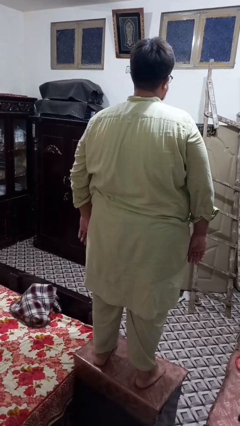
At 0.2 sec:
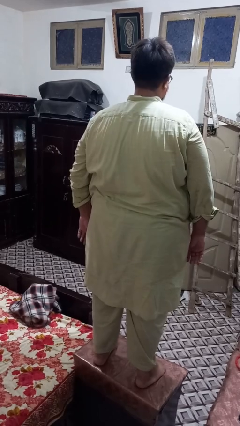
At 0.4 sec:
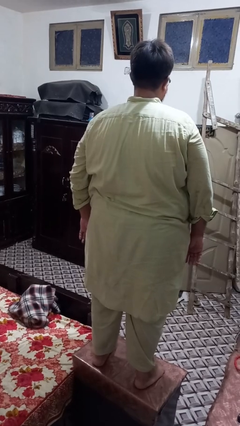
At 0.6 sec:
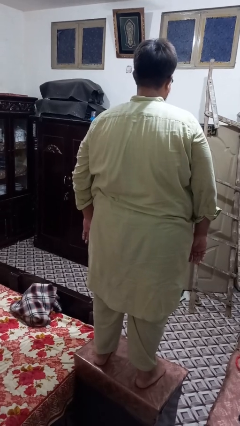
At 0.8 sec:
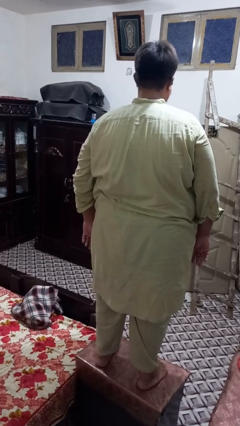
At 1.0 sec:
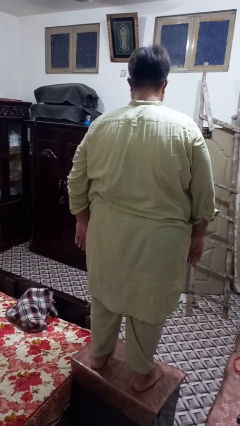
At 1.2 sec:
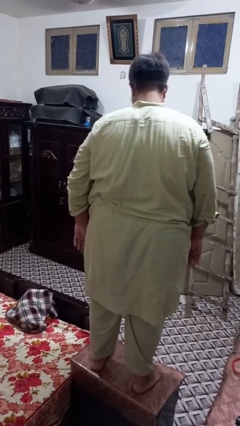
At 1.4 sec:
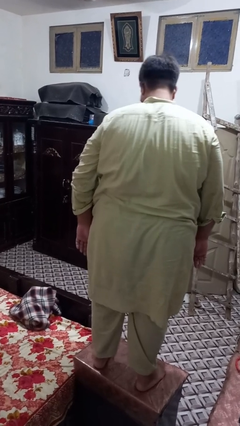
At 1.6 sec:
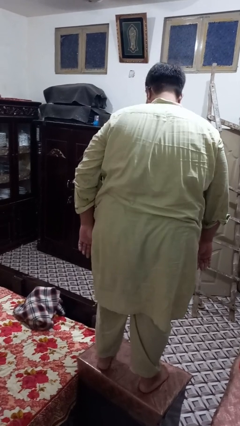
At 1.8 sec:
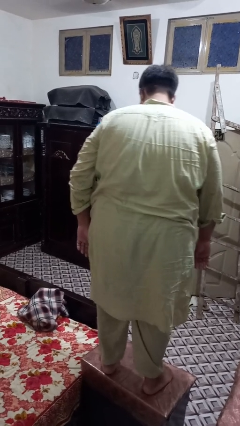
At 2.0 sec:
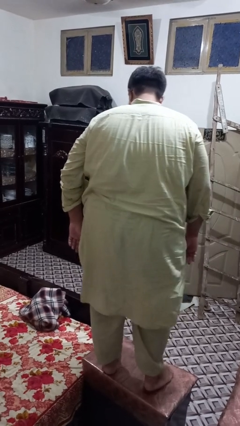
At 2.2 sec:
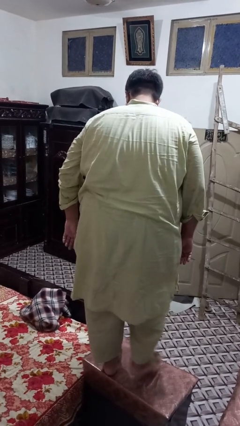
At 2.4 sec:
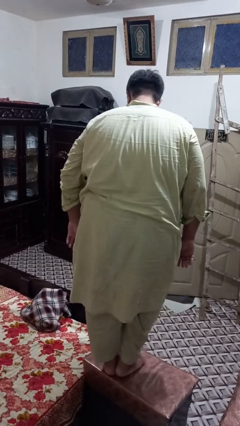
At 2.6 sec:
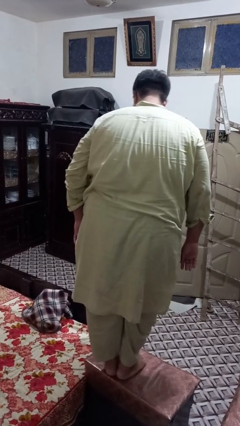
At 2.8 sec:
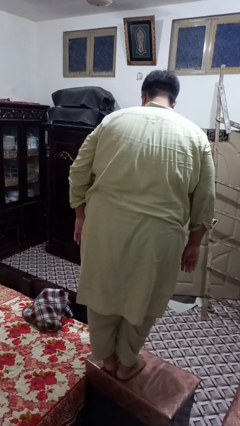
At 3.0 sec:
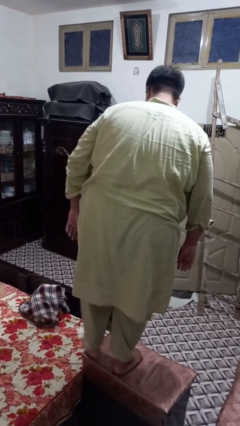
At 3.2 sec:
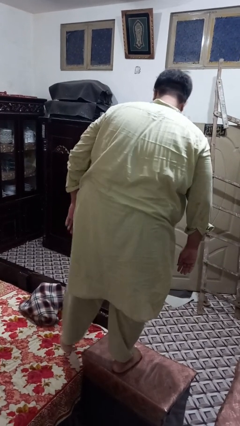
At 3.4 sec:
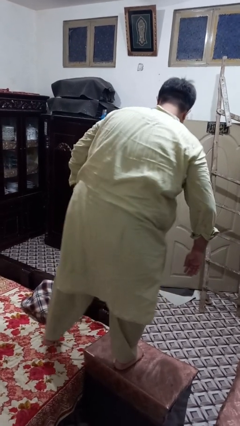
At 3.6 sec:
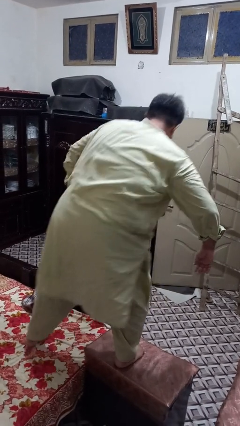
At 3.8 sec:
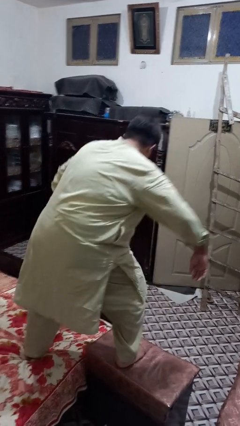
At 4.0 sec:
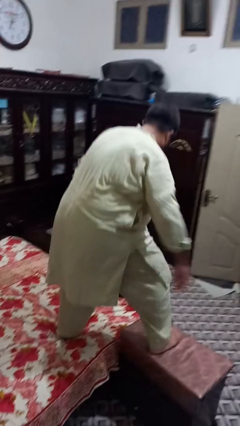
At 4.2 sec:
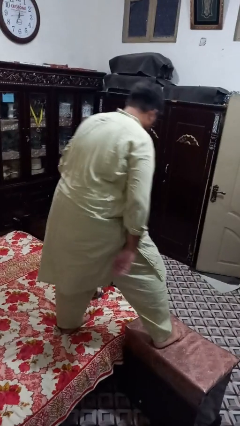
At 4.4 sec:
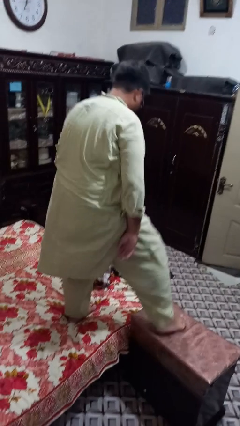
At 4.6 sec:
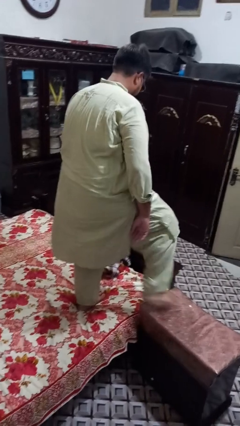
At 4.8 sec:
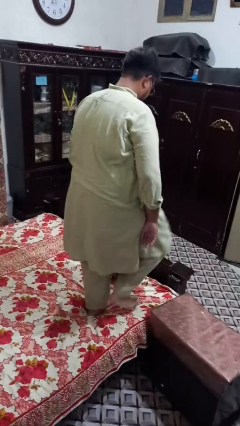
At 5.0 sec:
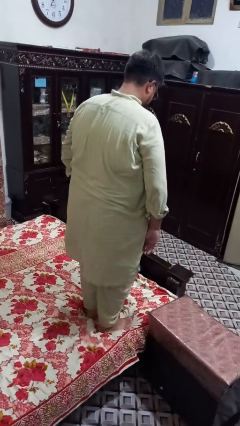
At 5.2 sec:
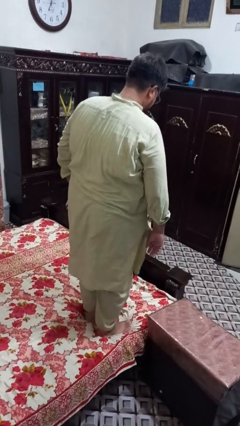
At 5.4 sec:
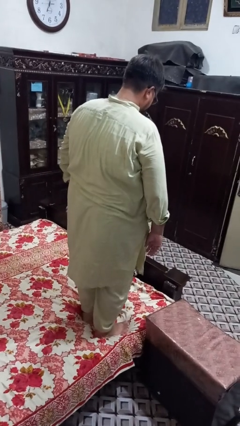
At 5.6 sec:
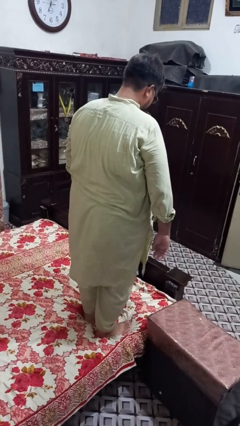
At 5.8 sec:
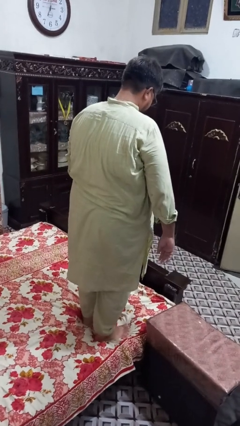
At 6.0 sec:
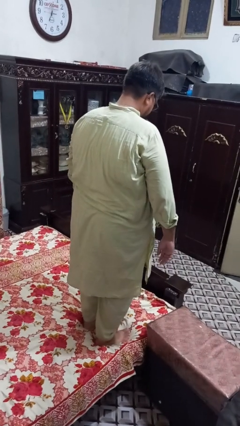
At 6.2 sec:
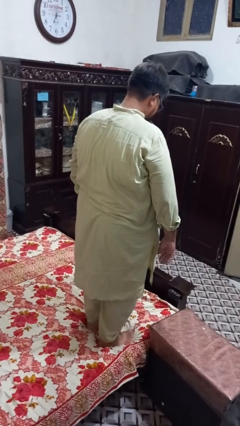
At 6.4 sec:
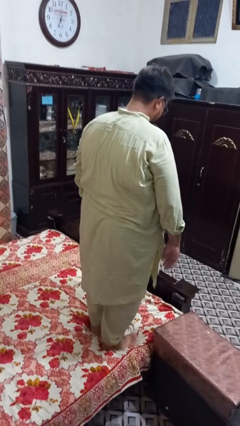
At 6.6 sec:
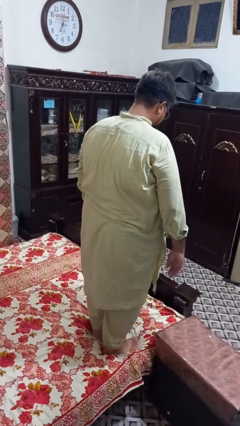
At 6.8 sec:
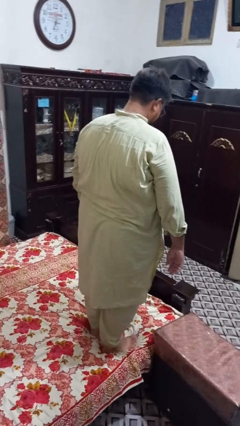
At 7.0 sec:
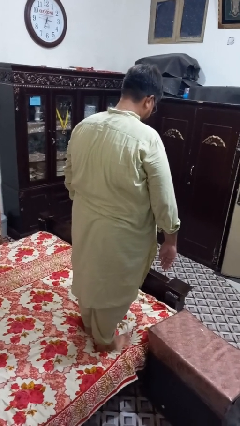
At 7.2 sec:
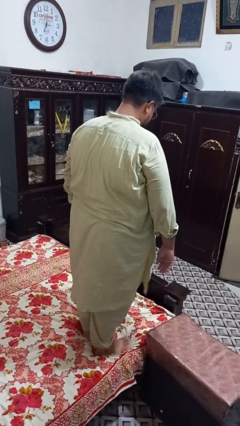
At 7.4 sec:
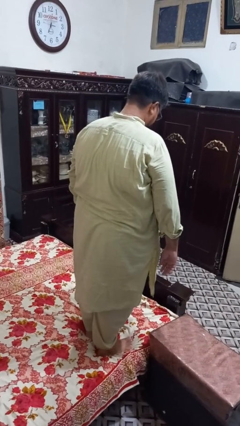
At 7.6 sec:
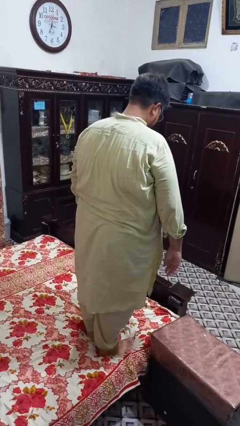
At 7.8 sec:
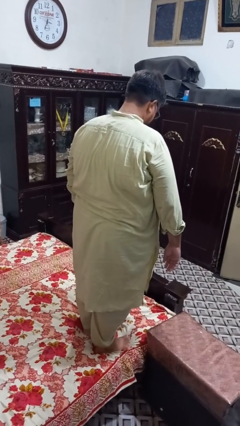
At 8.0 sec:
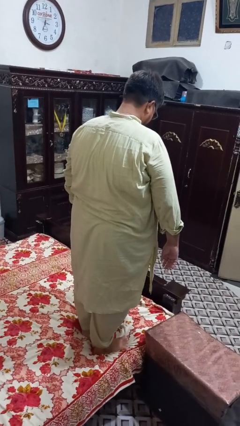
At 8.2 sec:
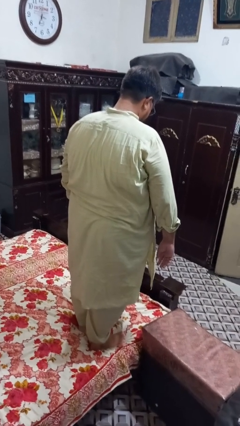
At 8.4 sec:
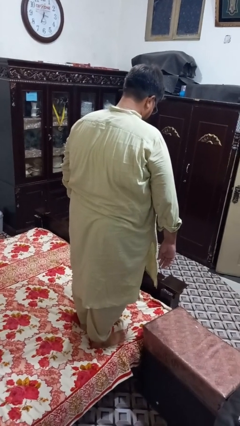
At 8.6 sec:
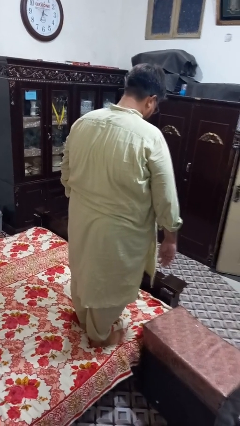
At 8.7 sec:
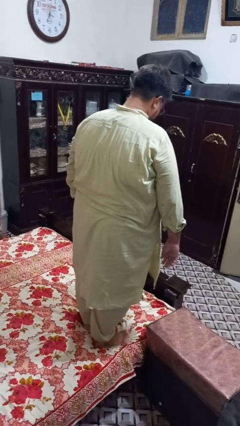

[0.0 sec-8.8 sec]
person climbs off table

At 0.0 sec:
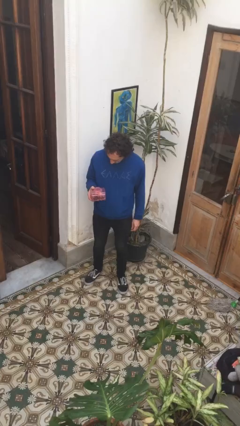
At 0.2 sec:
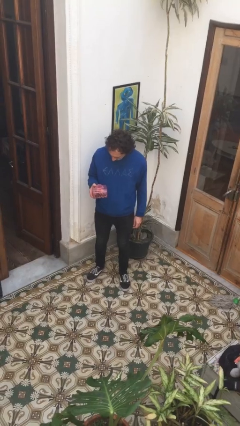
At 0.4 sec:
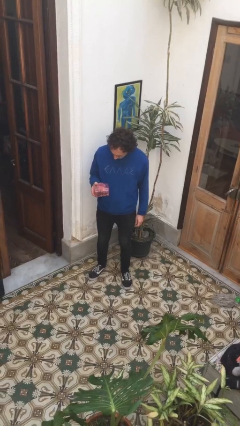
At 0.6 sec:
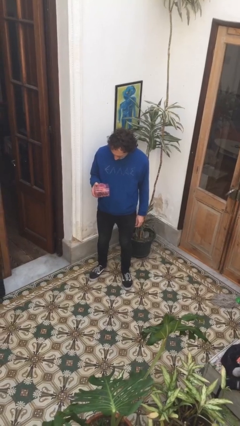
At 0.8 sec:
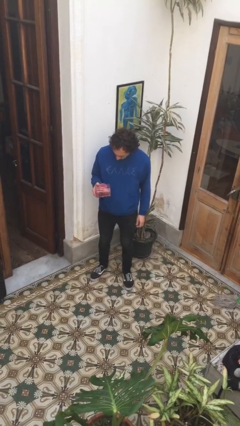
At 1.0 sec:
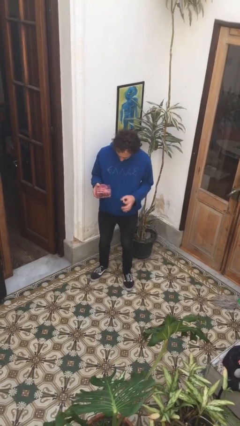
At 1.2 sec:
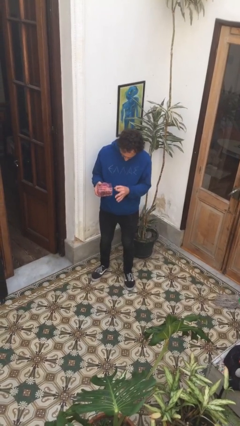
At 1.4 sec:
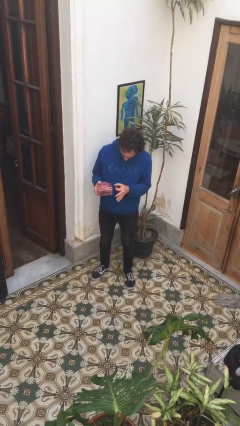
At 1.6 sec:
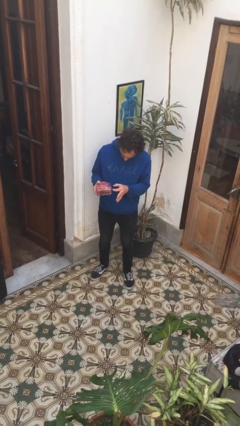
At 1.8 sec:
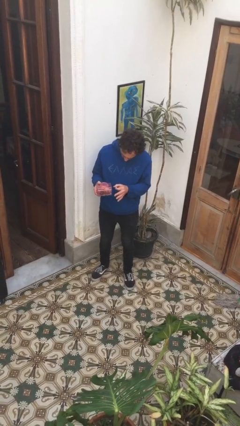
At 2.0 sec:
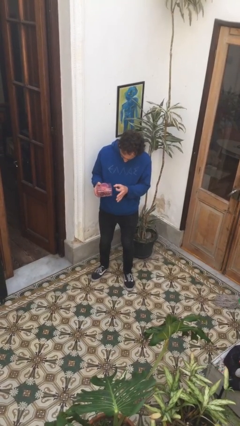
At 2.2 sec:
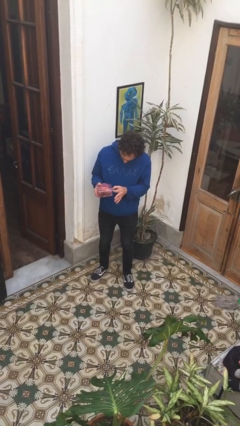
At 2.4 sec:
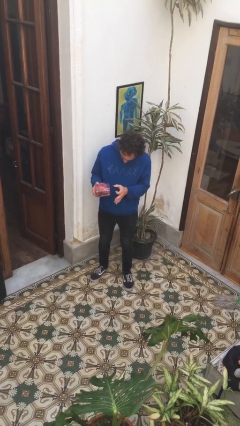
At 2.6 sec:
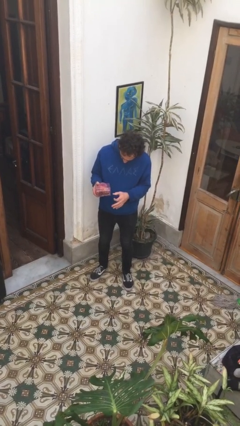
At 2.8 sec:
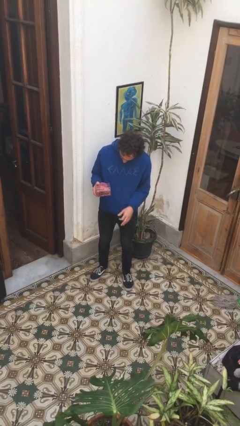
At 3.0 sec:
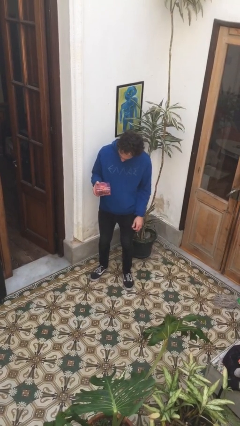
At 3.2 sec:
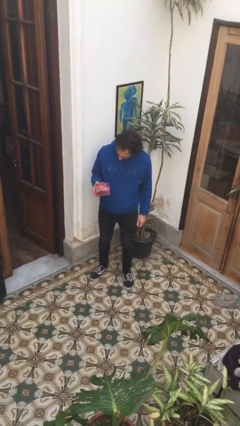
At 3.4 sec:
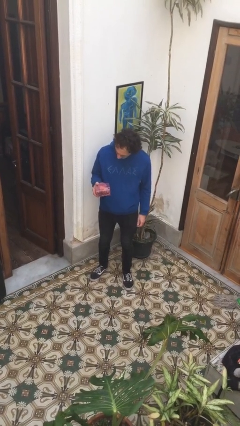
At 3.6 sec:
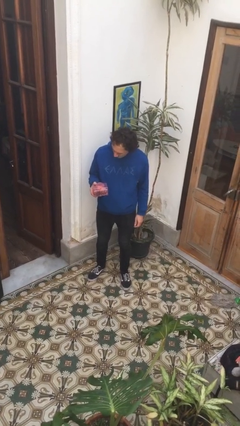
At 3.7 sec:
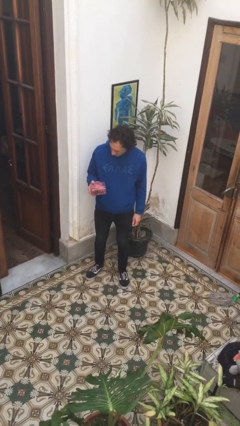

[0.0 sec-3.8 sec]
person taps object with finger

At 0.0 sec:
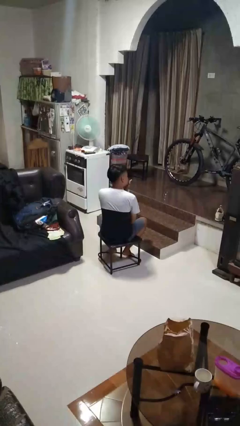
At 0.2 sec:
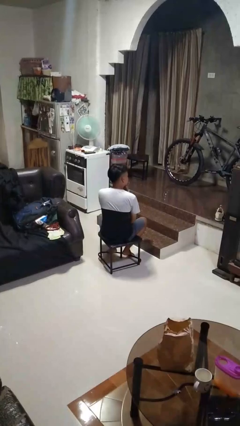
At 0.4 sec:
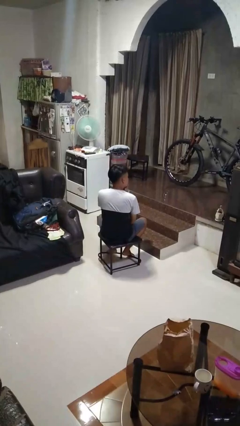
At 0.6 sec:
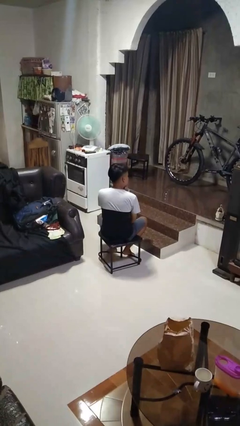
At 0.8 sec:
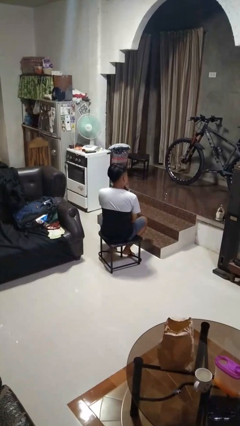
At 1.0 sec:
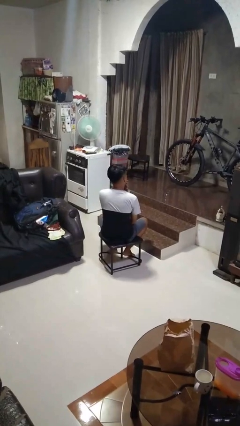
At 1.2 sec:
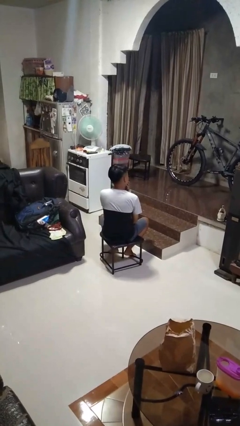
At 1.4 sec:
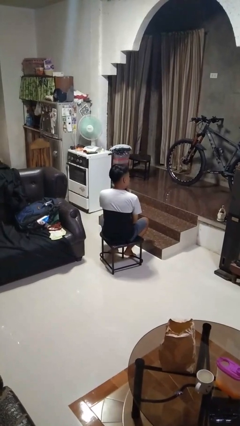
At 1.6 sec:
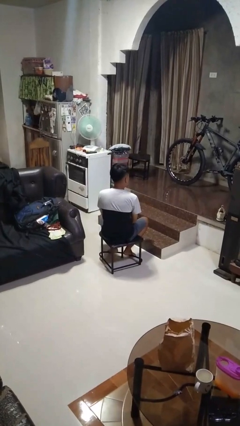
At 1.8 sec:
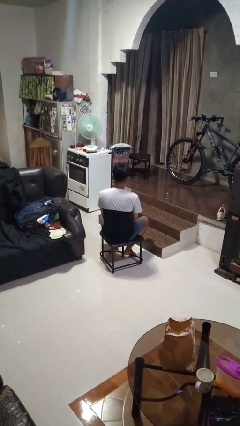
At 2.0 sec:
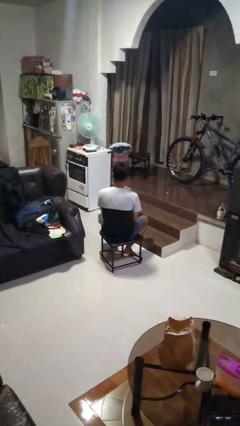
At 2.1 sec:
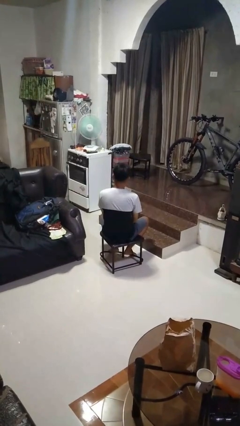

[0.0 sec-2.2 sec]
person strokes chin

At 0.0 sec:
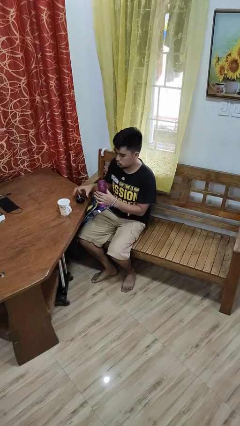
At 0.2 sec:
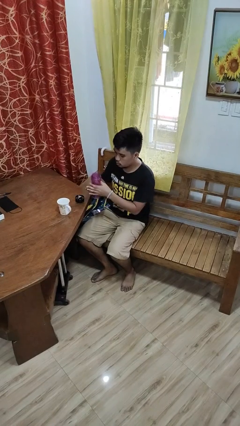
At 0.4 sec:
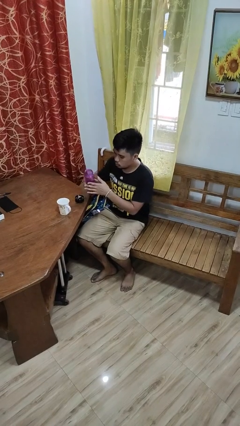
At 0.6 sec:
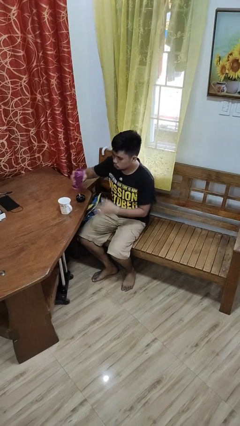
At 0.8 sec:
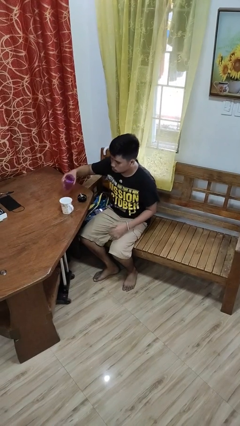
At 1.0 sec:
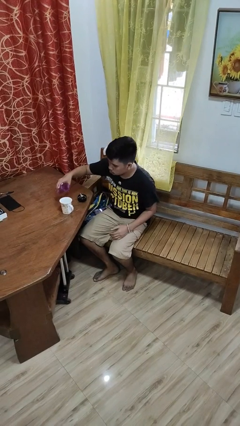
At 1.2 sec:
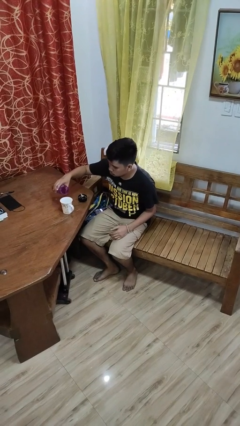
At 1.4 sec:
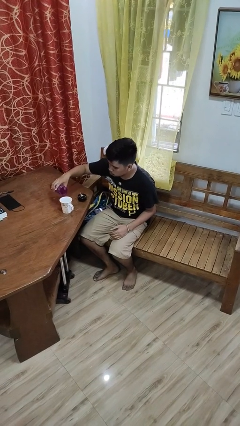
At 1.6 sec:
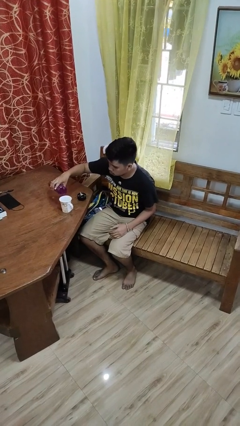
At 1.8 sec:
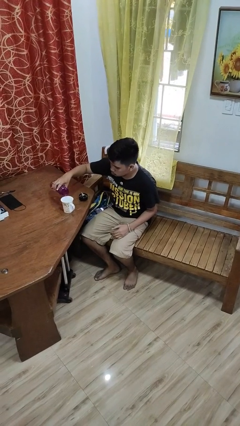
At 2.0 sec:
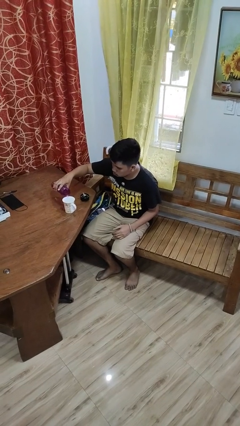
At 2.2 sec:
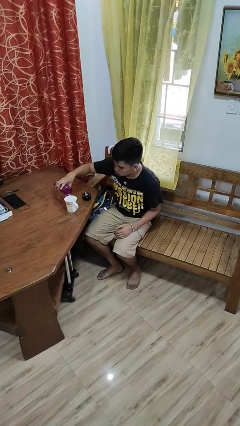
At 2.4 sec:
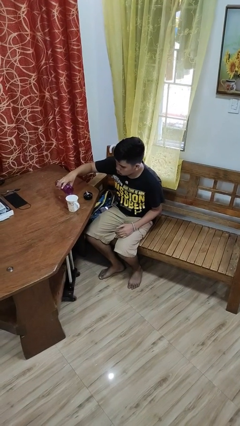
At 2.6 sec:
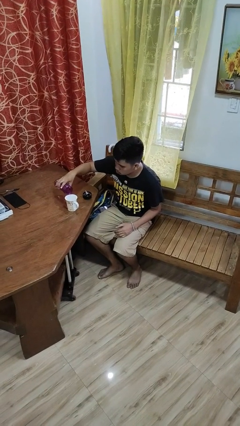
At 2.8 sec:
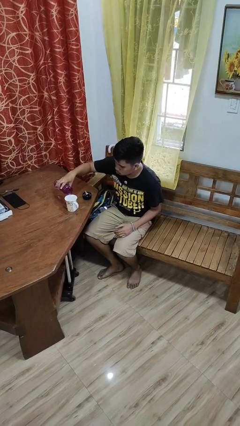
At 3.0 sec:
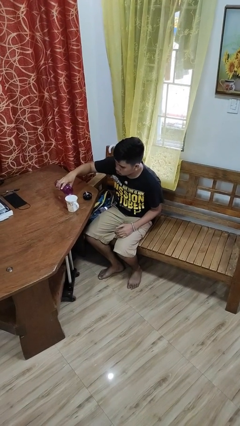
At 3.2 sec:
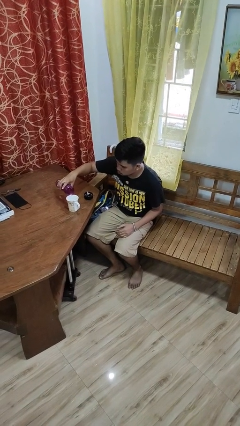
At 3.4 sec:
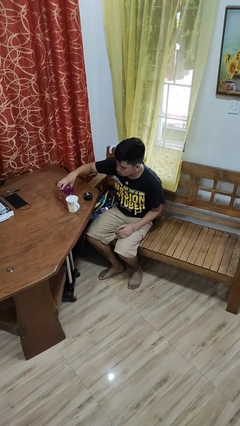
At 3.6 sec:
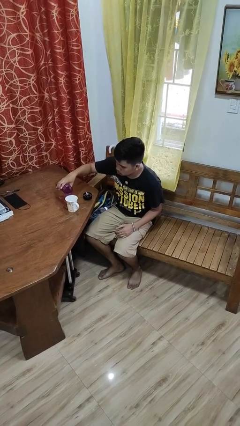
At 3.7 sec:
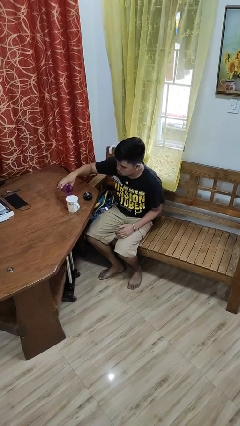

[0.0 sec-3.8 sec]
person pours liquid into cup
